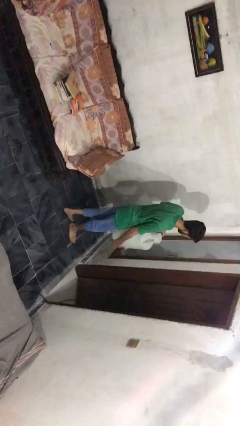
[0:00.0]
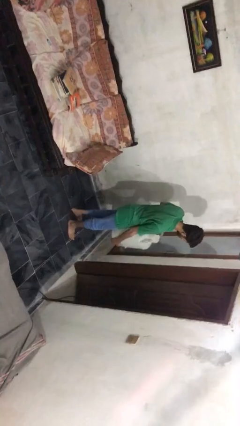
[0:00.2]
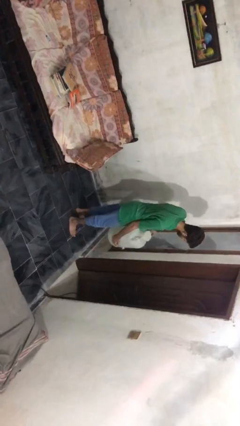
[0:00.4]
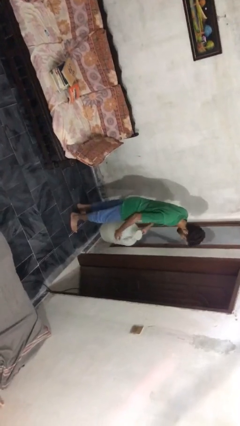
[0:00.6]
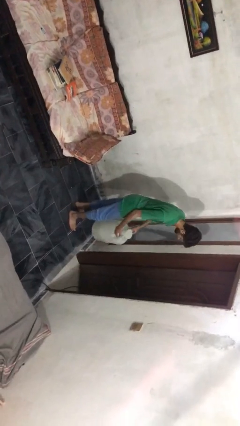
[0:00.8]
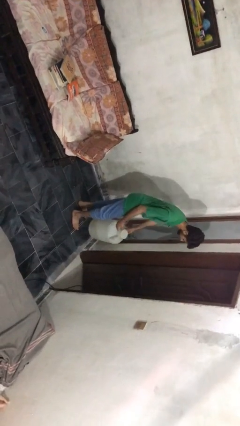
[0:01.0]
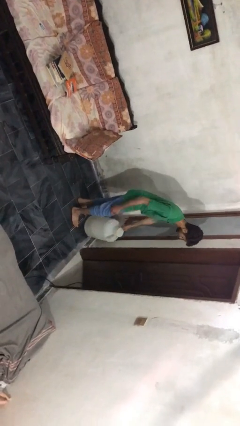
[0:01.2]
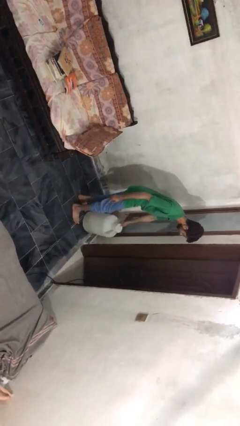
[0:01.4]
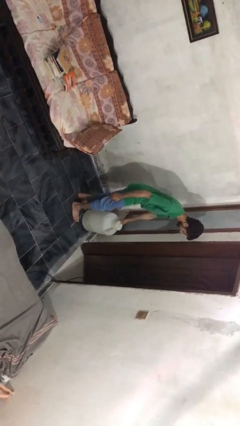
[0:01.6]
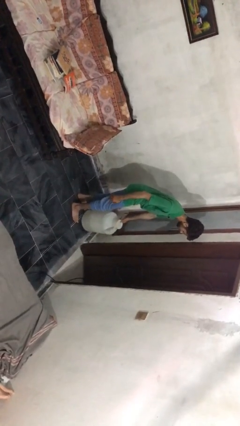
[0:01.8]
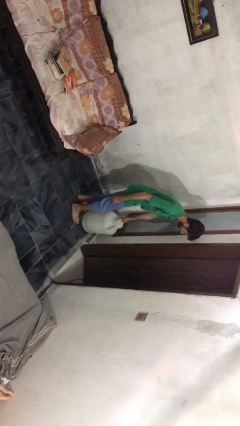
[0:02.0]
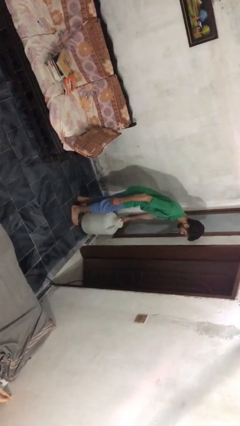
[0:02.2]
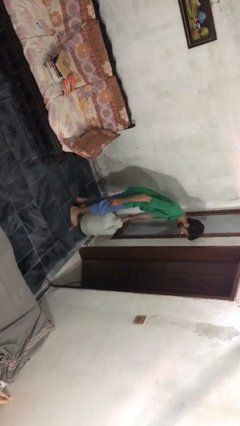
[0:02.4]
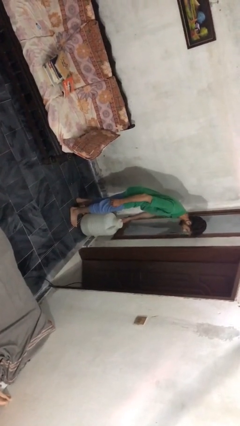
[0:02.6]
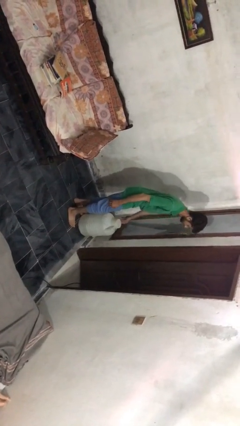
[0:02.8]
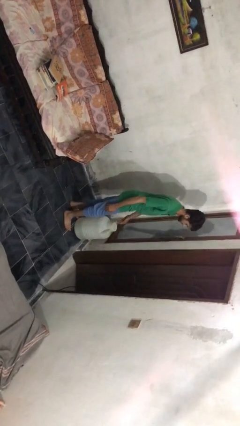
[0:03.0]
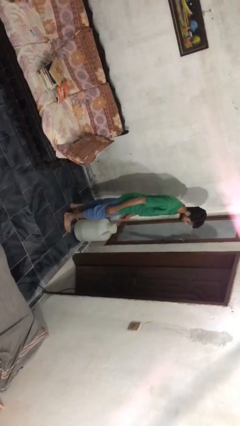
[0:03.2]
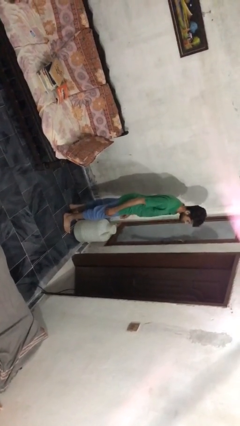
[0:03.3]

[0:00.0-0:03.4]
person puts down object on floor

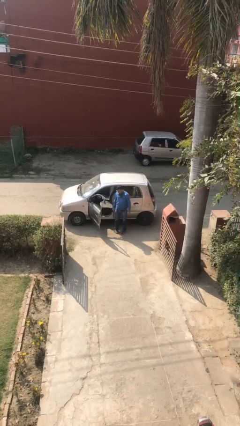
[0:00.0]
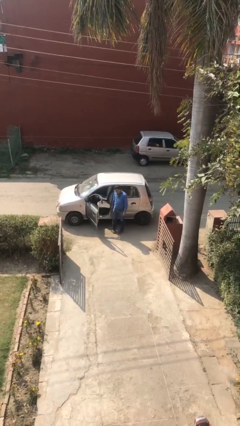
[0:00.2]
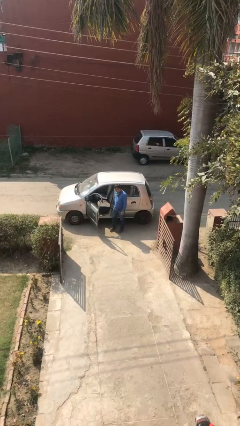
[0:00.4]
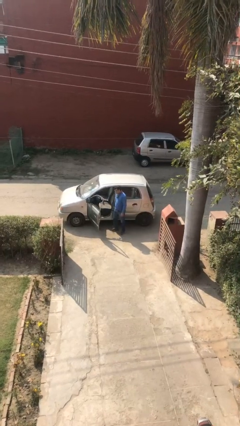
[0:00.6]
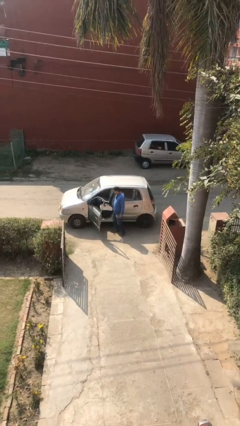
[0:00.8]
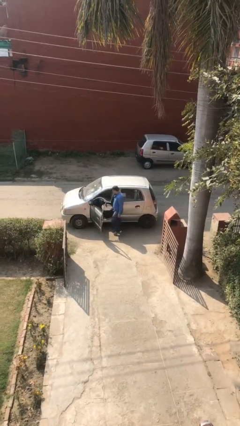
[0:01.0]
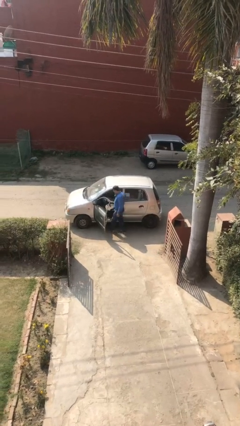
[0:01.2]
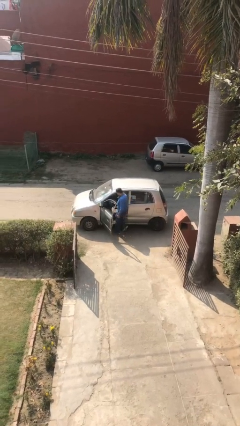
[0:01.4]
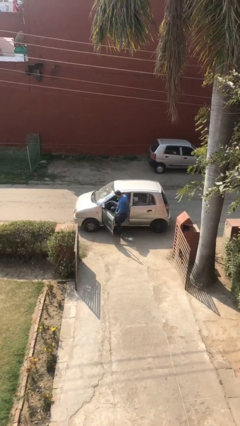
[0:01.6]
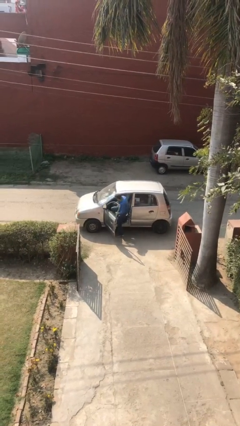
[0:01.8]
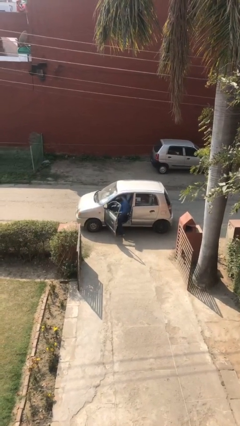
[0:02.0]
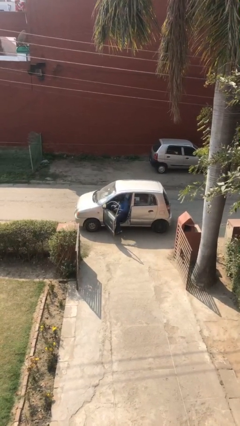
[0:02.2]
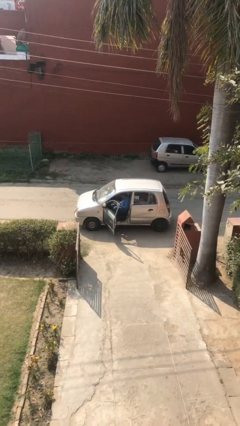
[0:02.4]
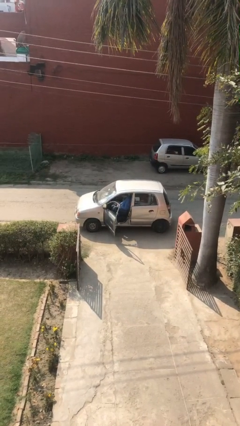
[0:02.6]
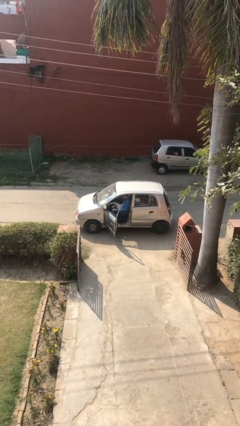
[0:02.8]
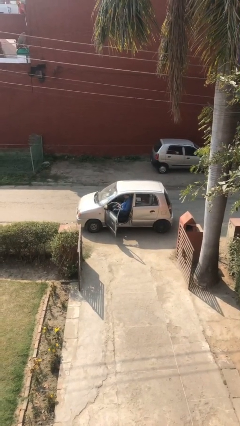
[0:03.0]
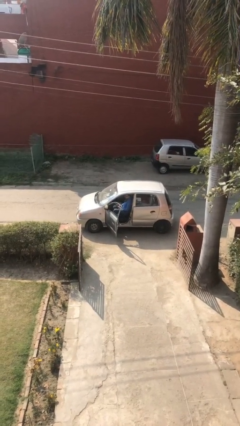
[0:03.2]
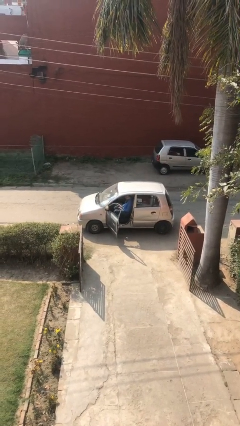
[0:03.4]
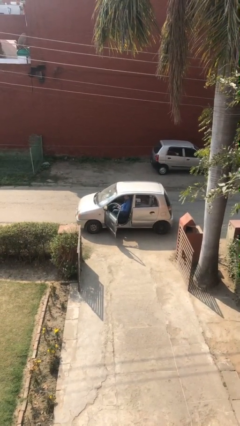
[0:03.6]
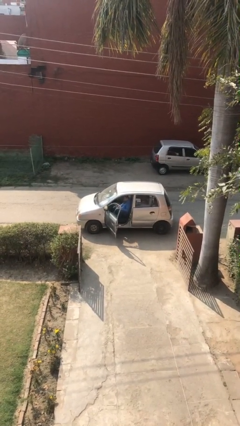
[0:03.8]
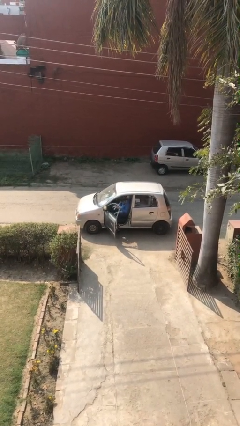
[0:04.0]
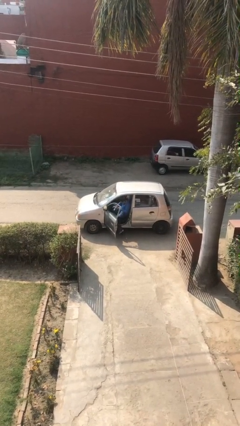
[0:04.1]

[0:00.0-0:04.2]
person enters car

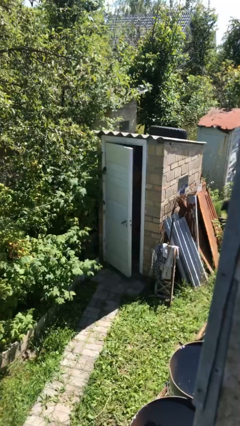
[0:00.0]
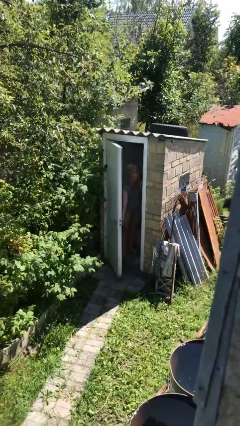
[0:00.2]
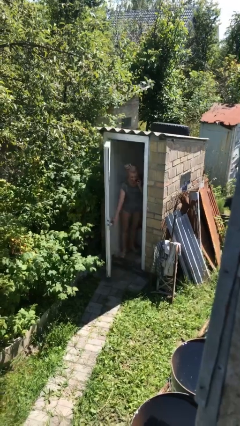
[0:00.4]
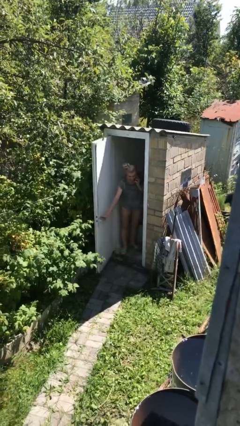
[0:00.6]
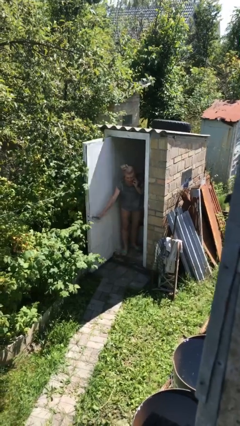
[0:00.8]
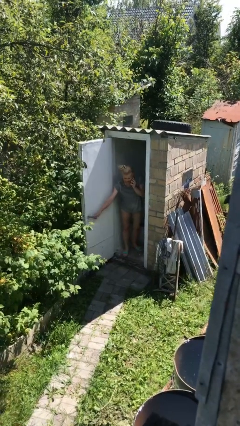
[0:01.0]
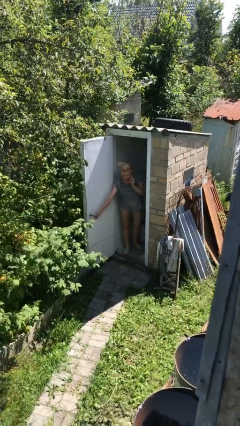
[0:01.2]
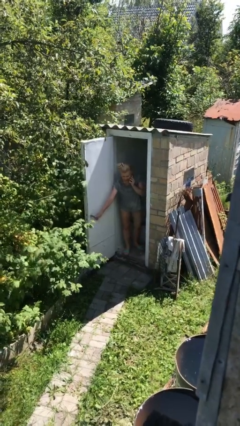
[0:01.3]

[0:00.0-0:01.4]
person opens facility door

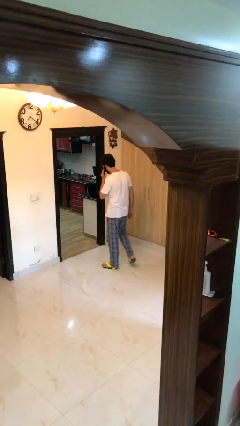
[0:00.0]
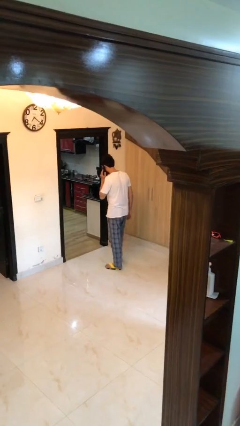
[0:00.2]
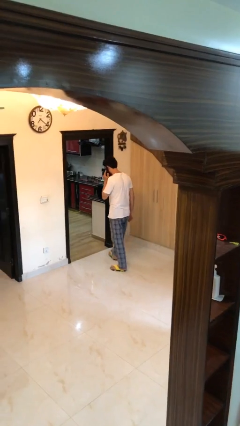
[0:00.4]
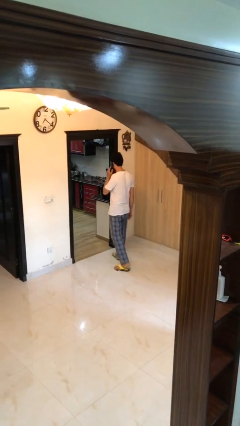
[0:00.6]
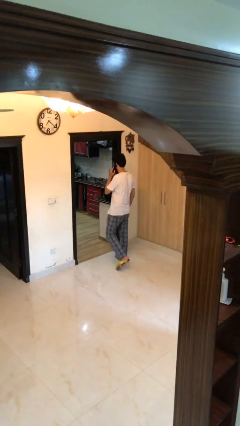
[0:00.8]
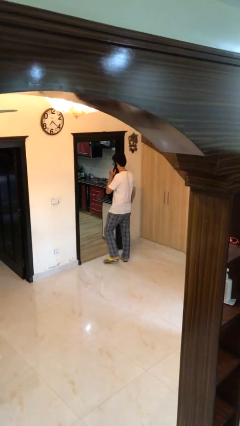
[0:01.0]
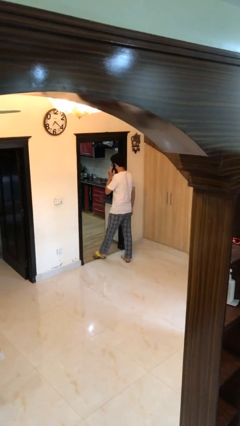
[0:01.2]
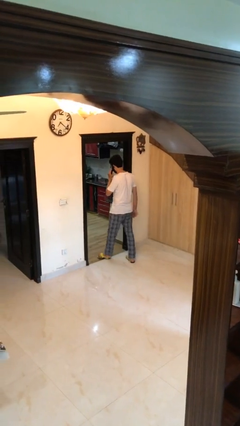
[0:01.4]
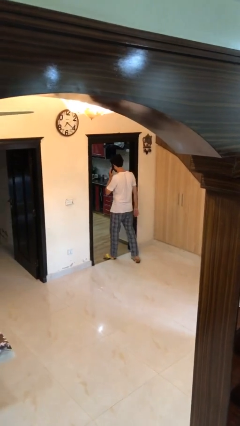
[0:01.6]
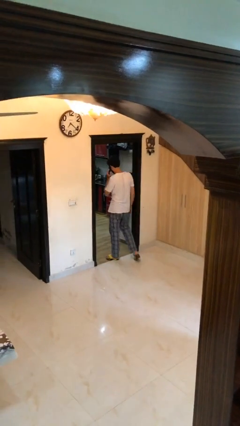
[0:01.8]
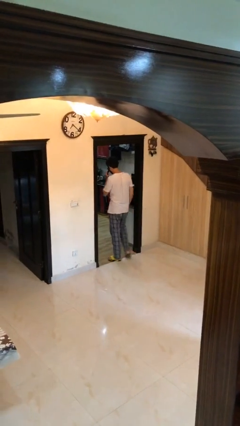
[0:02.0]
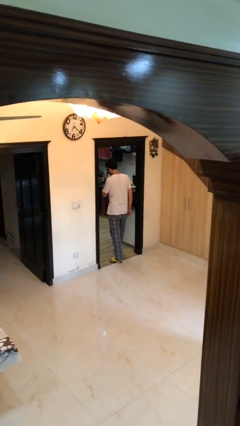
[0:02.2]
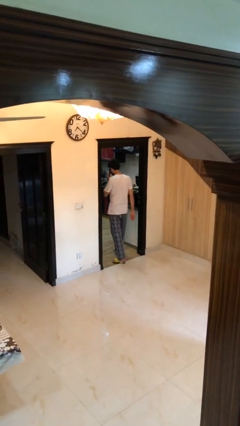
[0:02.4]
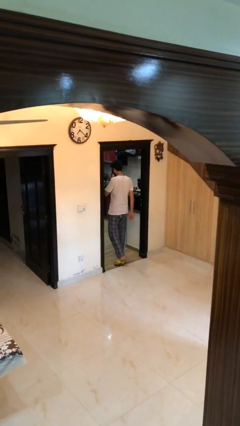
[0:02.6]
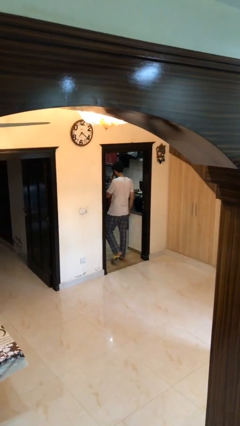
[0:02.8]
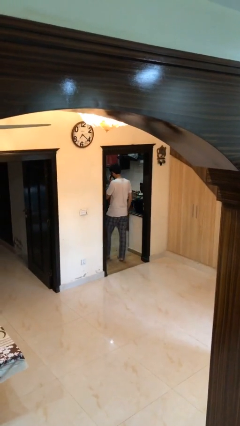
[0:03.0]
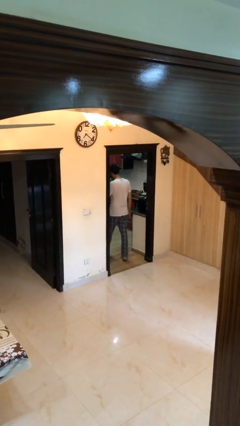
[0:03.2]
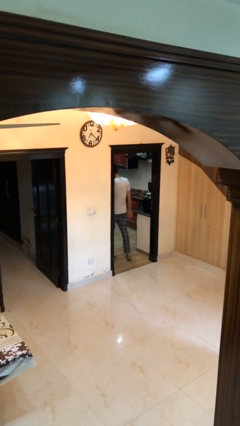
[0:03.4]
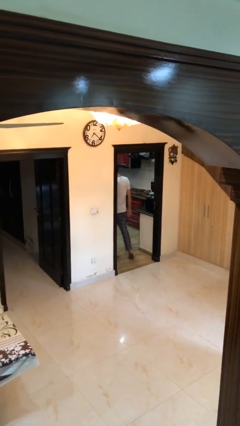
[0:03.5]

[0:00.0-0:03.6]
person exits scene through structure

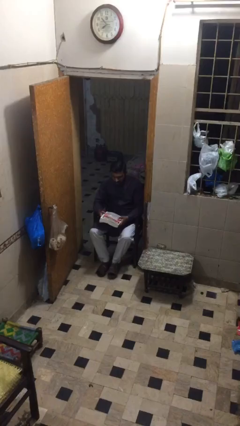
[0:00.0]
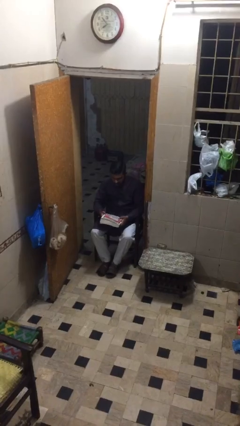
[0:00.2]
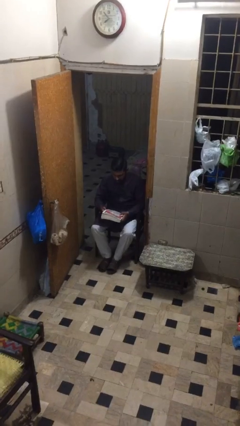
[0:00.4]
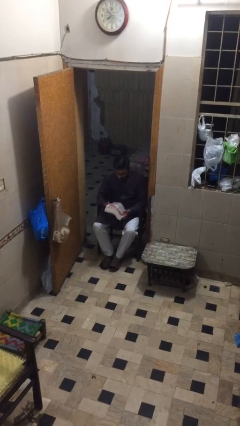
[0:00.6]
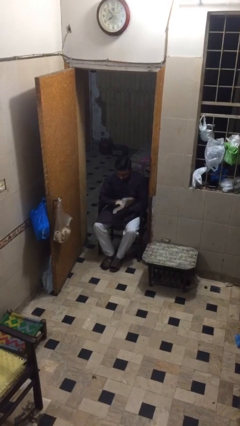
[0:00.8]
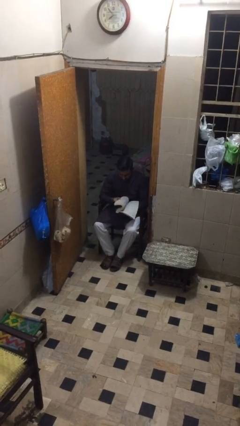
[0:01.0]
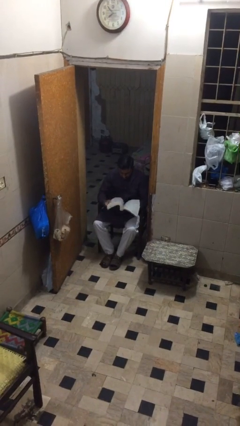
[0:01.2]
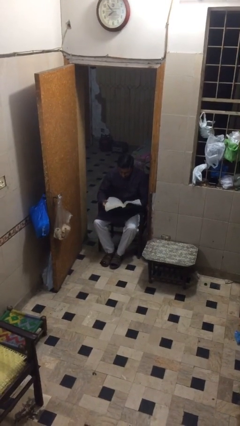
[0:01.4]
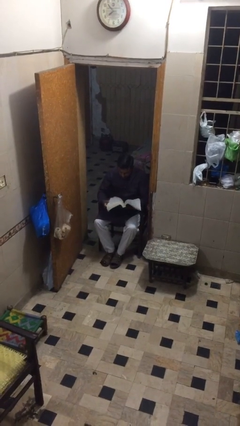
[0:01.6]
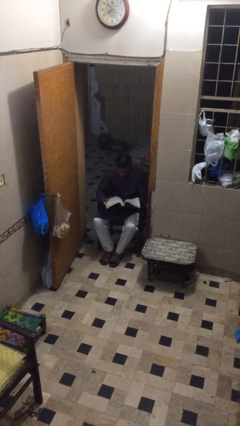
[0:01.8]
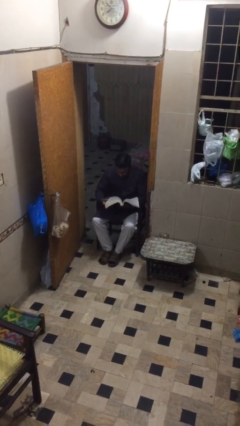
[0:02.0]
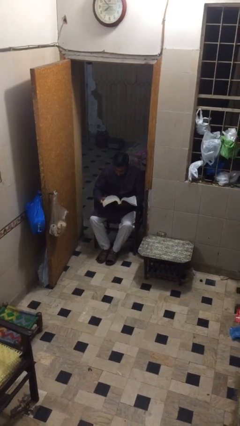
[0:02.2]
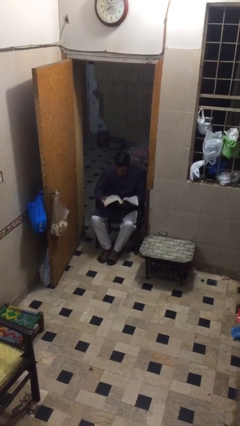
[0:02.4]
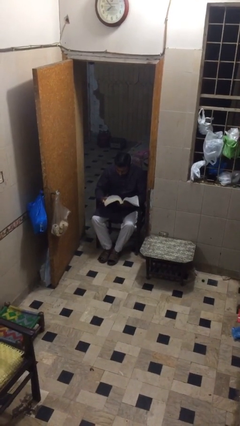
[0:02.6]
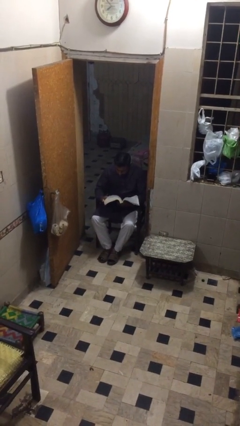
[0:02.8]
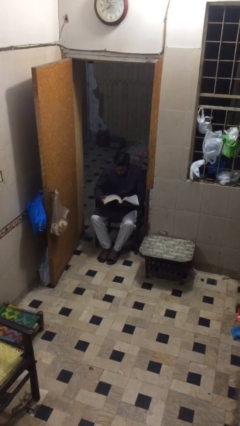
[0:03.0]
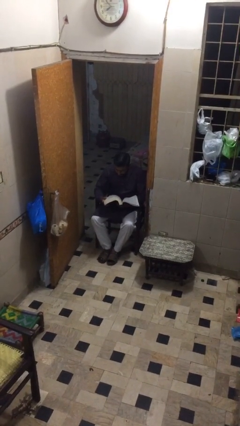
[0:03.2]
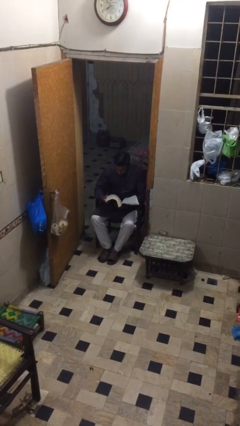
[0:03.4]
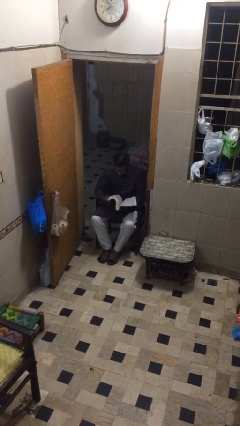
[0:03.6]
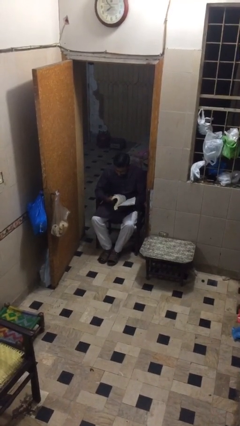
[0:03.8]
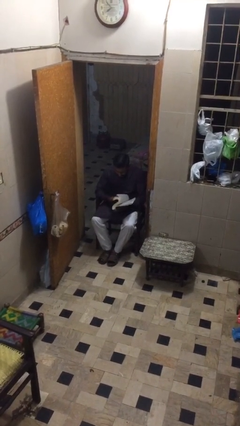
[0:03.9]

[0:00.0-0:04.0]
person reads document

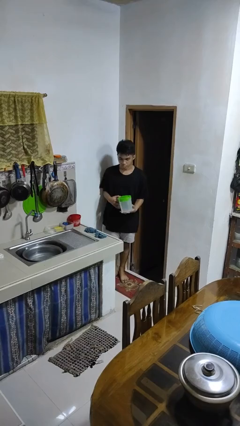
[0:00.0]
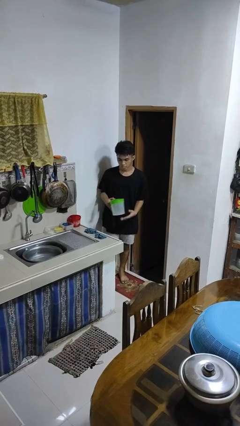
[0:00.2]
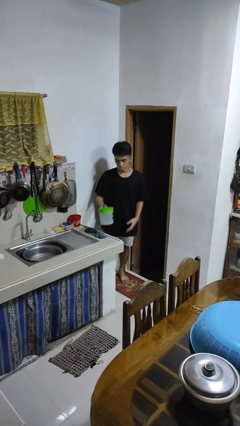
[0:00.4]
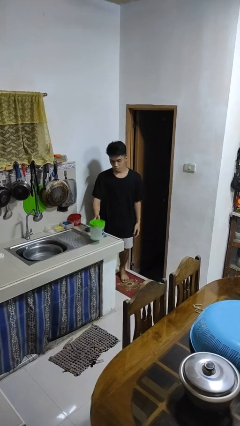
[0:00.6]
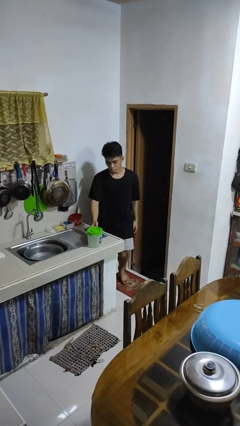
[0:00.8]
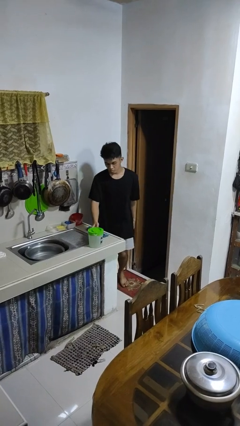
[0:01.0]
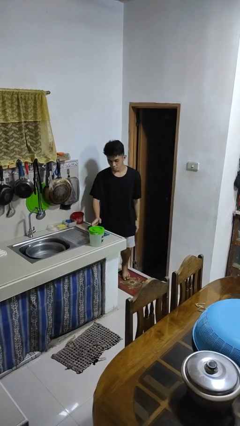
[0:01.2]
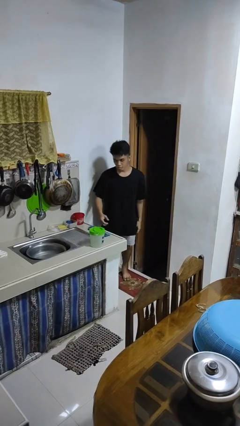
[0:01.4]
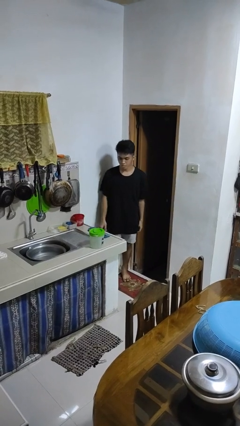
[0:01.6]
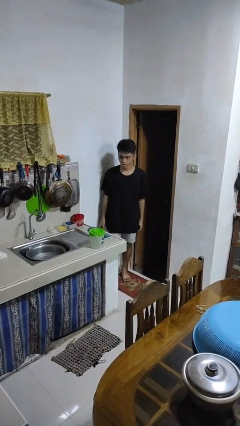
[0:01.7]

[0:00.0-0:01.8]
person puts down object on countertop
